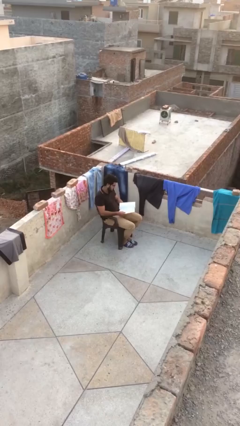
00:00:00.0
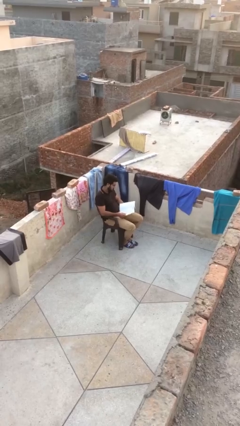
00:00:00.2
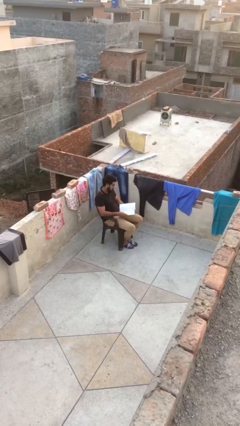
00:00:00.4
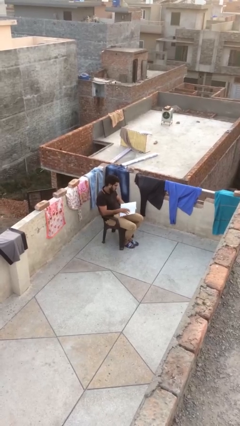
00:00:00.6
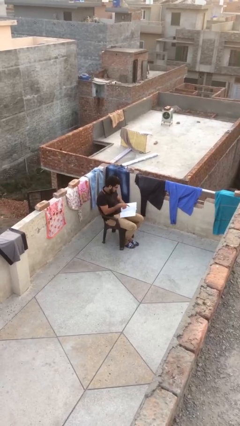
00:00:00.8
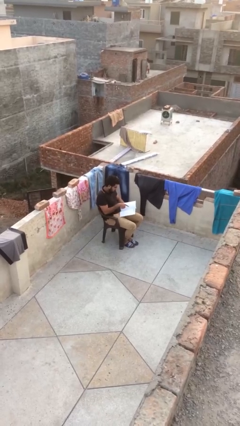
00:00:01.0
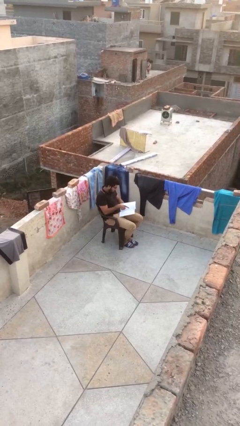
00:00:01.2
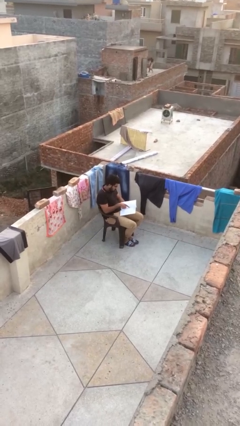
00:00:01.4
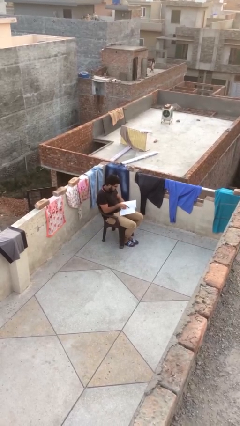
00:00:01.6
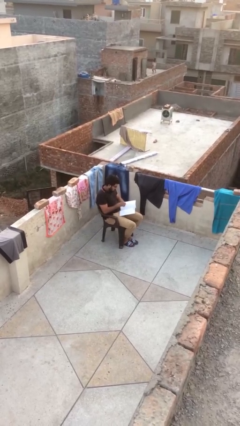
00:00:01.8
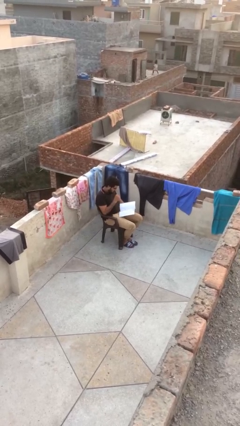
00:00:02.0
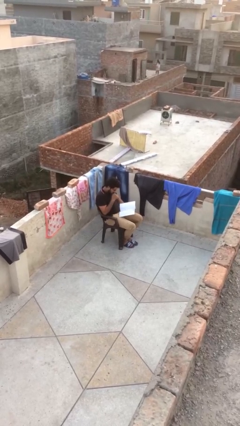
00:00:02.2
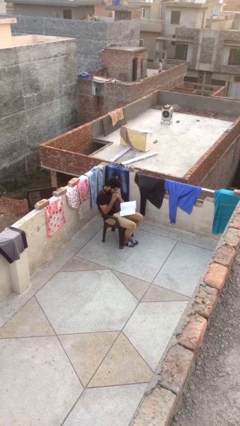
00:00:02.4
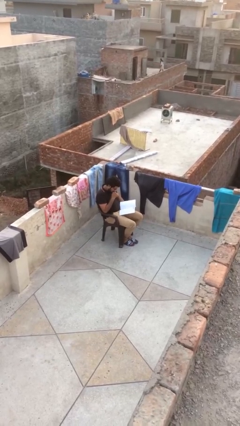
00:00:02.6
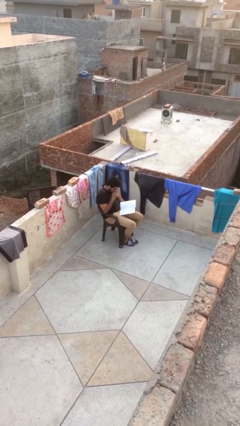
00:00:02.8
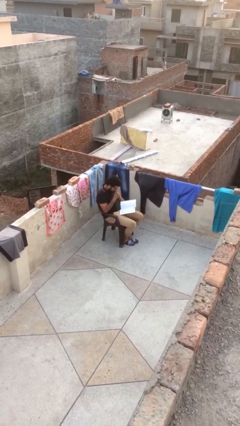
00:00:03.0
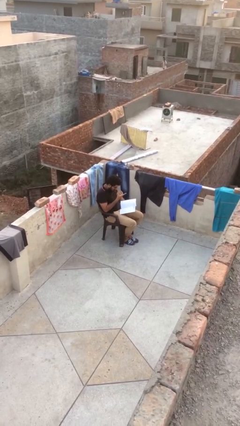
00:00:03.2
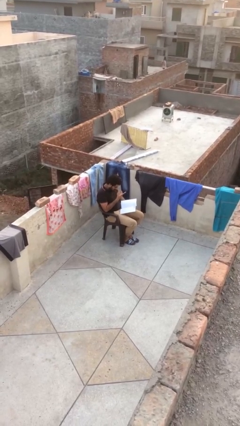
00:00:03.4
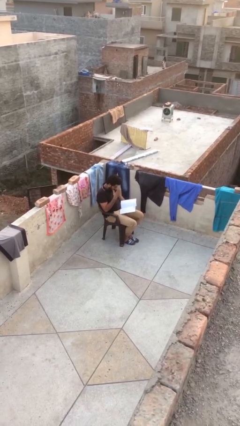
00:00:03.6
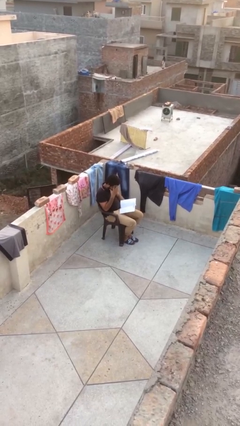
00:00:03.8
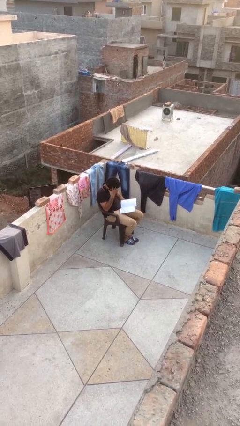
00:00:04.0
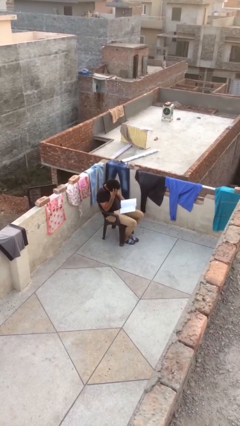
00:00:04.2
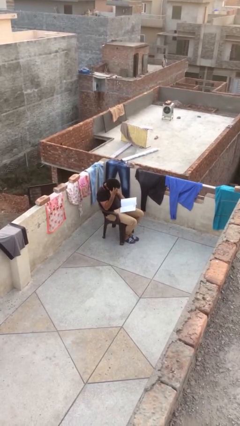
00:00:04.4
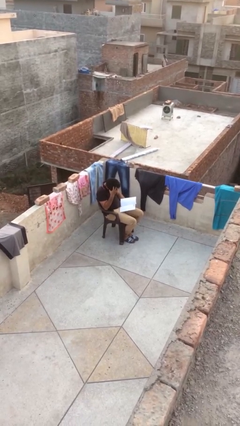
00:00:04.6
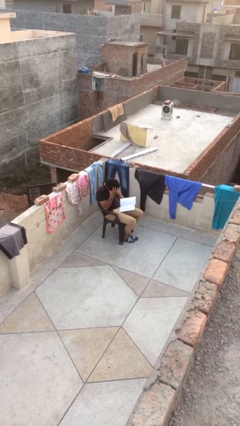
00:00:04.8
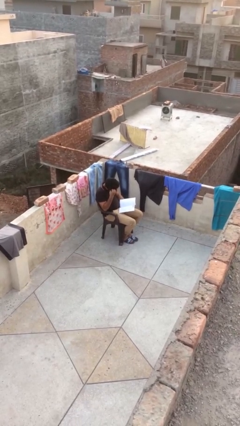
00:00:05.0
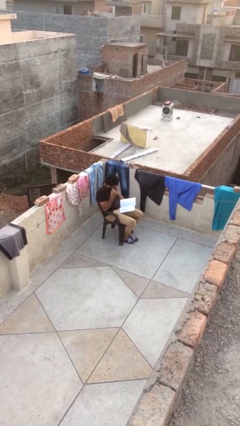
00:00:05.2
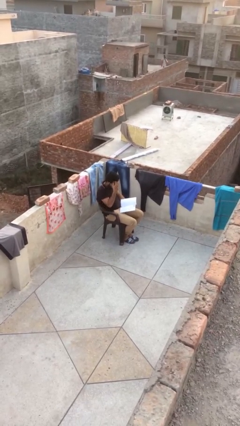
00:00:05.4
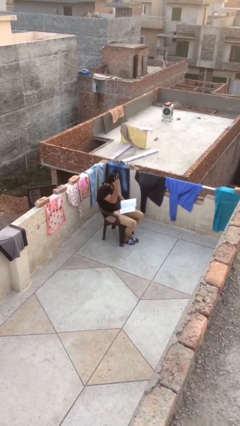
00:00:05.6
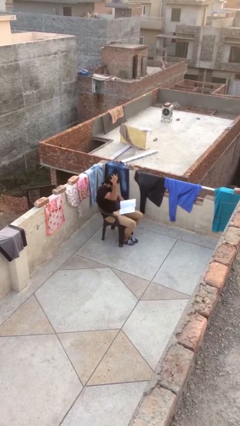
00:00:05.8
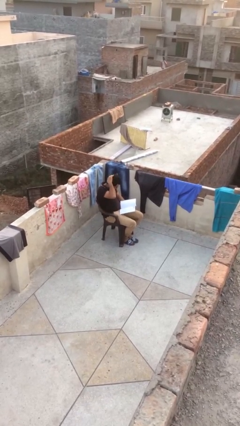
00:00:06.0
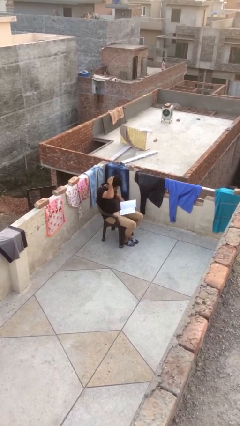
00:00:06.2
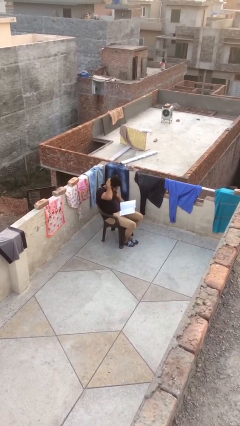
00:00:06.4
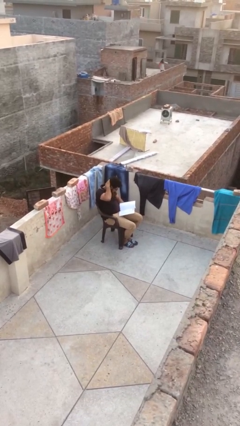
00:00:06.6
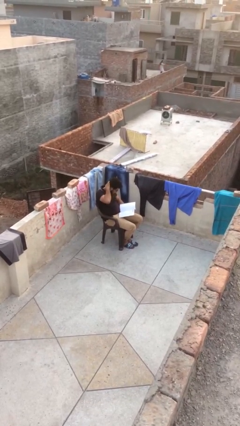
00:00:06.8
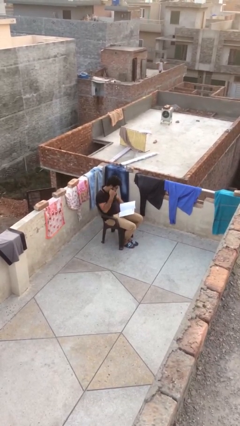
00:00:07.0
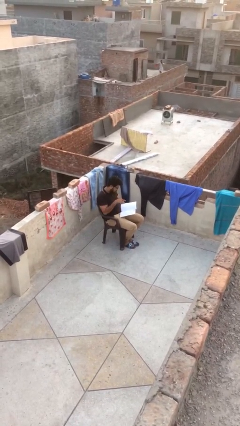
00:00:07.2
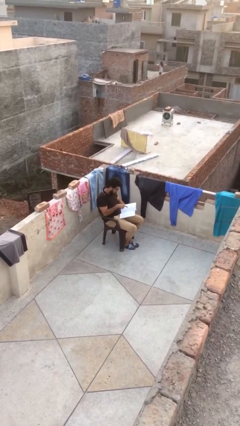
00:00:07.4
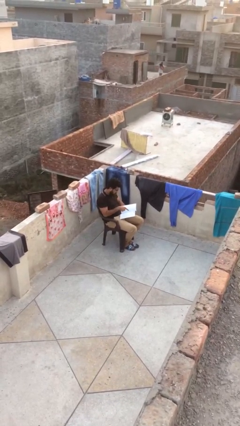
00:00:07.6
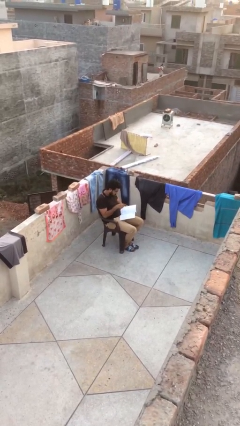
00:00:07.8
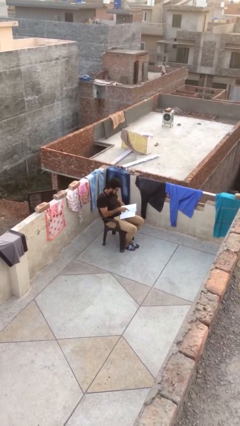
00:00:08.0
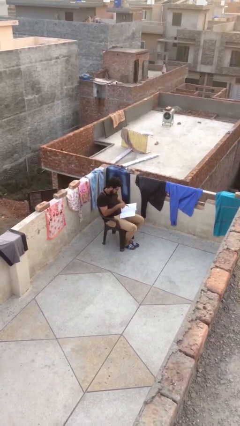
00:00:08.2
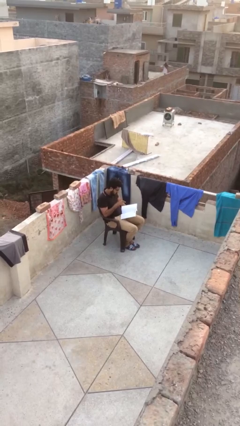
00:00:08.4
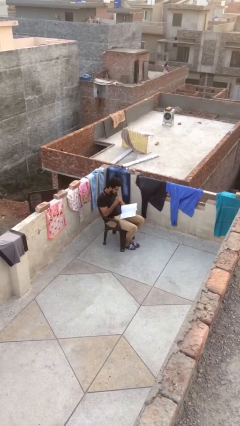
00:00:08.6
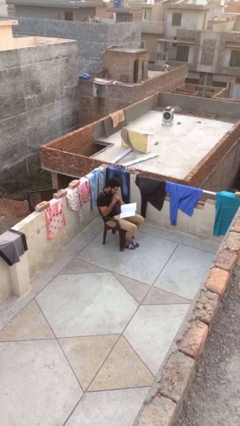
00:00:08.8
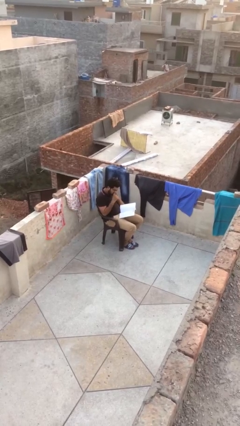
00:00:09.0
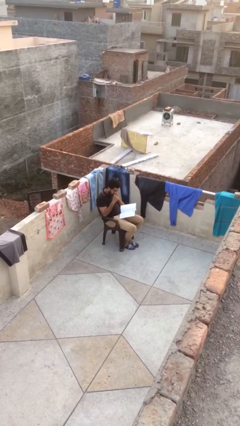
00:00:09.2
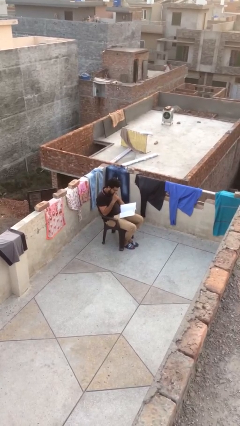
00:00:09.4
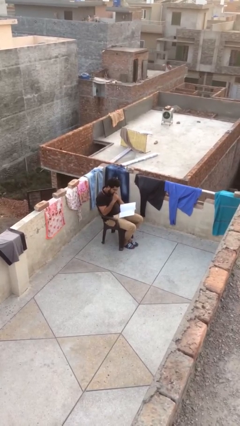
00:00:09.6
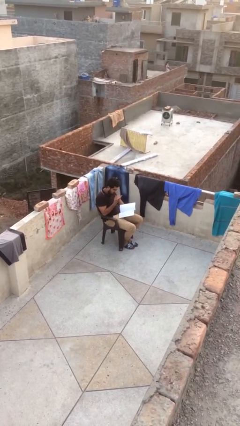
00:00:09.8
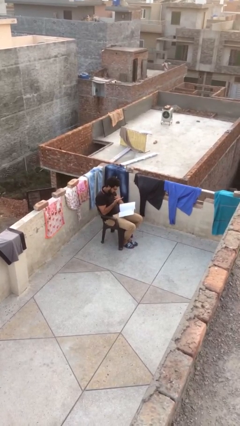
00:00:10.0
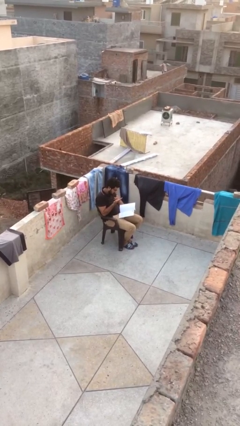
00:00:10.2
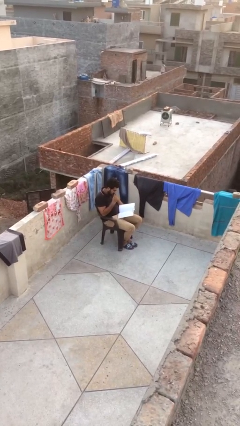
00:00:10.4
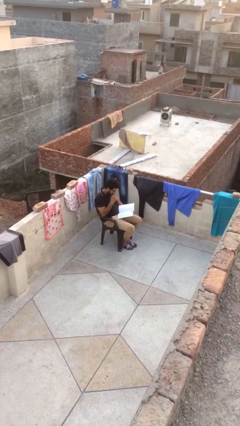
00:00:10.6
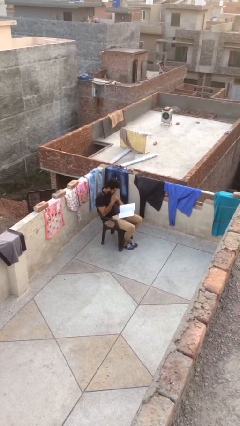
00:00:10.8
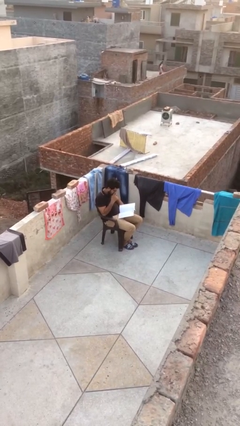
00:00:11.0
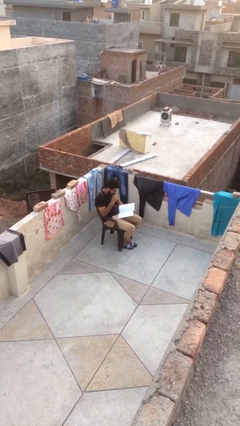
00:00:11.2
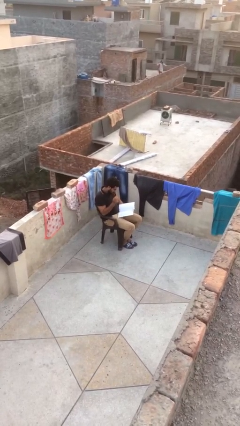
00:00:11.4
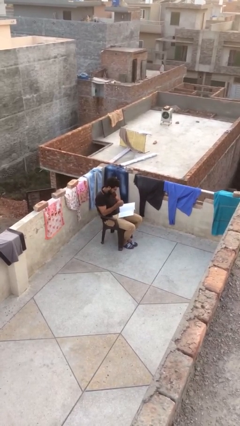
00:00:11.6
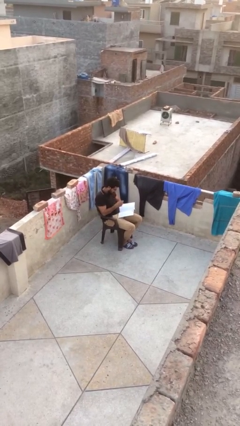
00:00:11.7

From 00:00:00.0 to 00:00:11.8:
person reads document

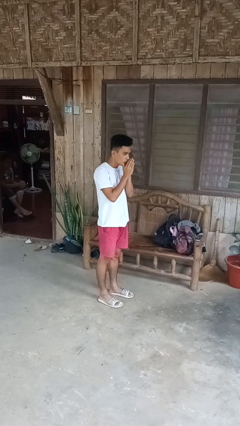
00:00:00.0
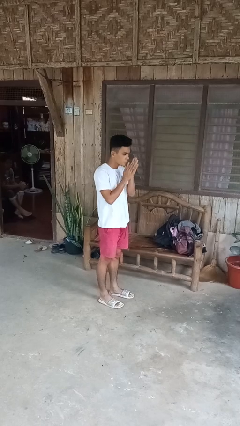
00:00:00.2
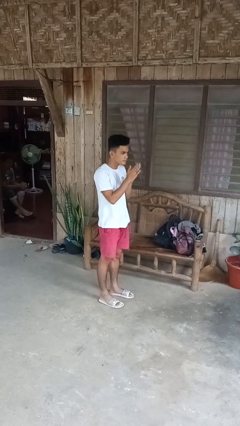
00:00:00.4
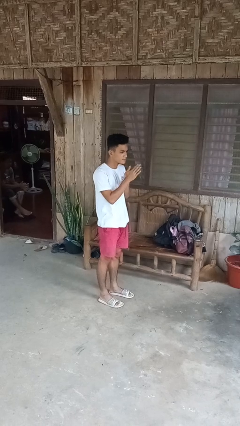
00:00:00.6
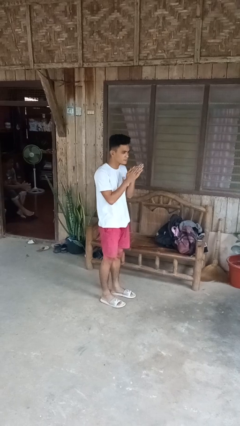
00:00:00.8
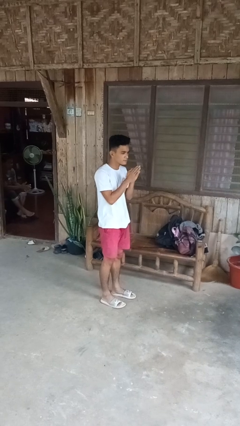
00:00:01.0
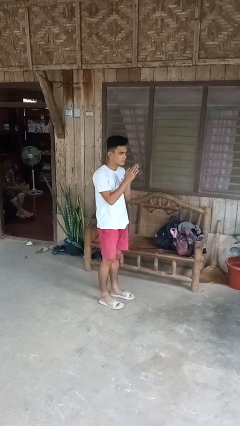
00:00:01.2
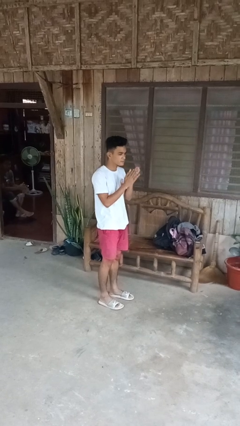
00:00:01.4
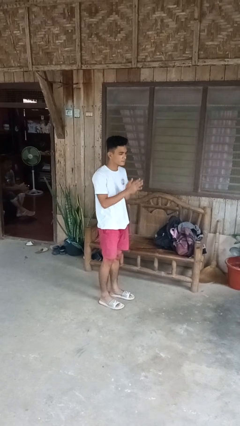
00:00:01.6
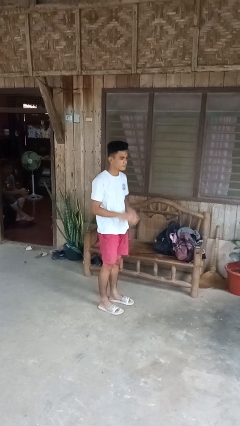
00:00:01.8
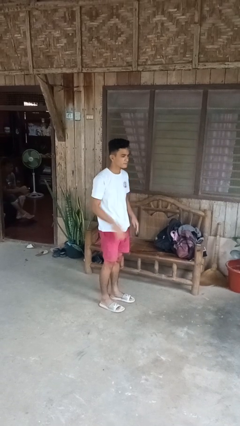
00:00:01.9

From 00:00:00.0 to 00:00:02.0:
person blows into hands

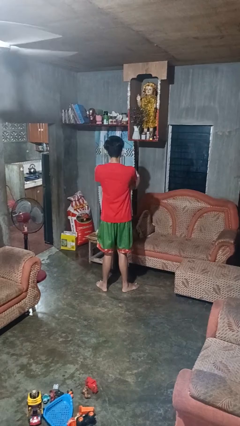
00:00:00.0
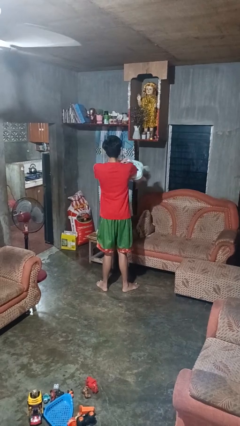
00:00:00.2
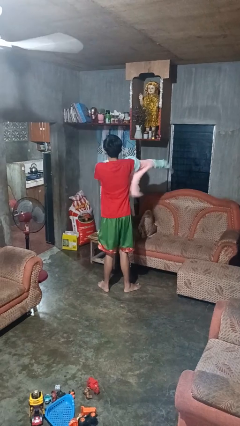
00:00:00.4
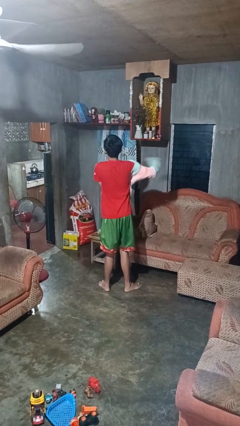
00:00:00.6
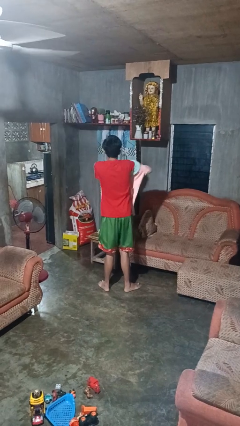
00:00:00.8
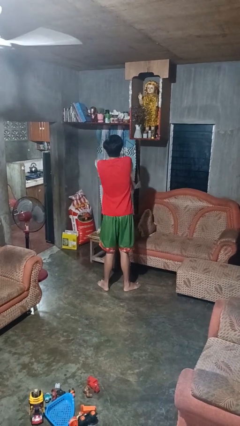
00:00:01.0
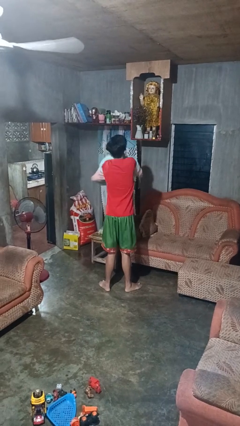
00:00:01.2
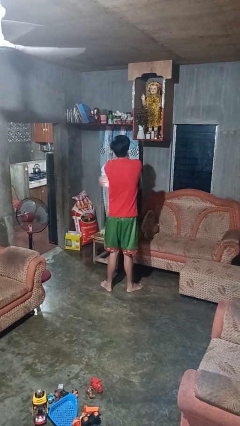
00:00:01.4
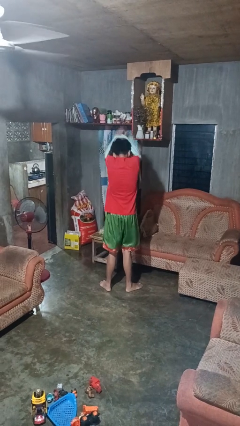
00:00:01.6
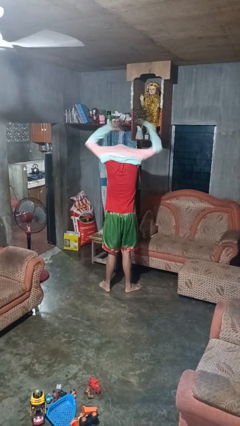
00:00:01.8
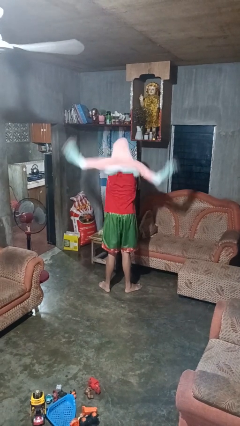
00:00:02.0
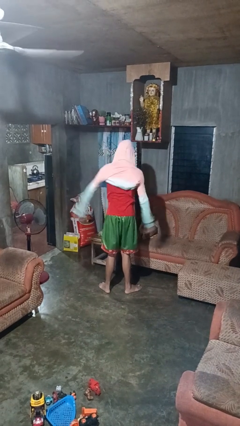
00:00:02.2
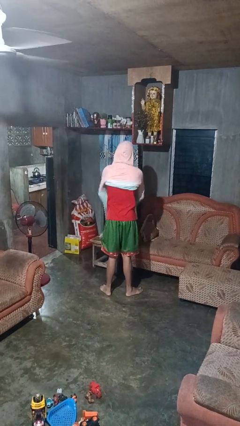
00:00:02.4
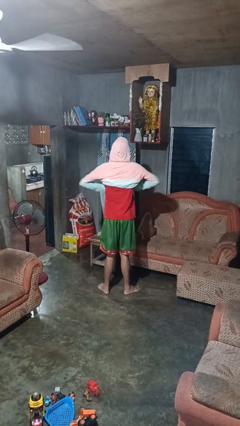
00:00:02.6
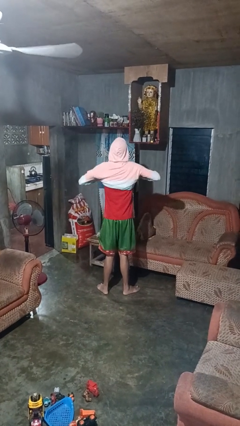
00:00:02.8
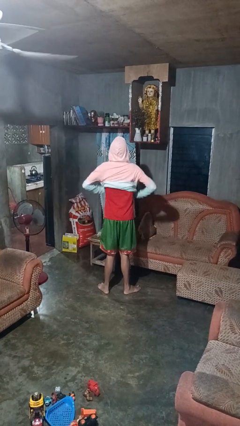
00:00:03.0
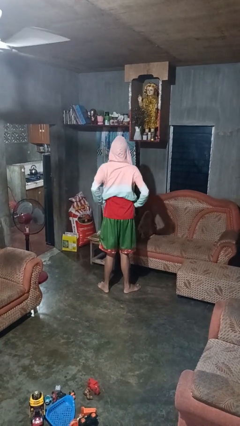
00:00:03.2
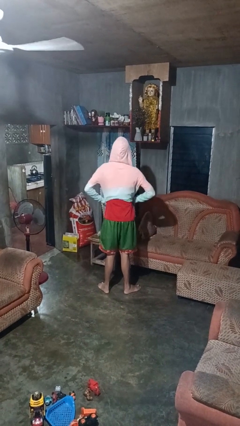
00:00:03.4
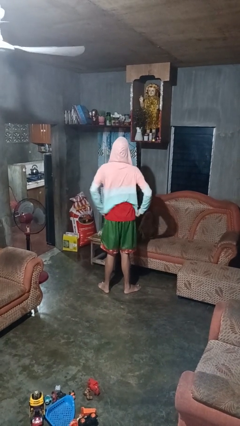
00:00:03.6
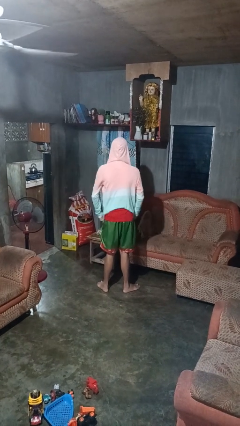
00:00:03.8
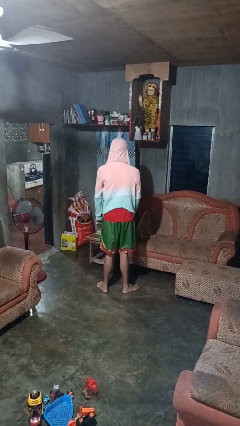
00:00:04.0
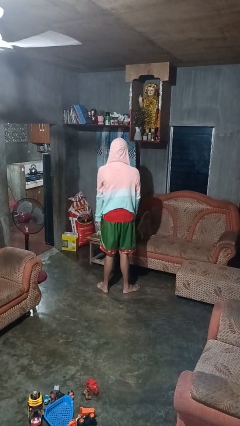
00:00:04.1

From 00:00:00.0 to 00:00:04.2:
person puts on hoodie
